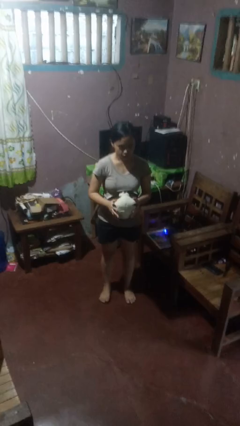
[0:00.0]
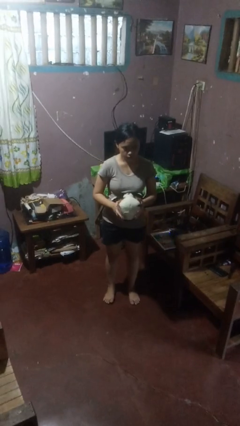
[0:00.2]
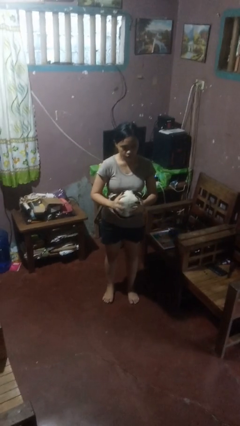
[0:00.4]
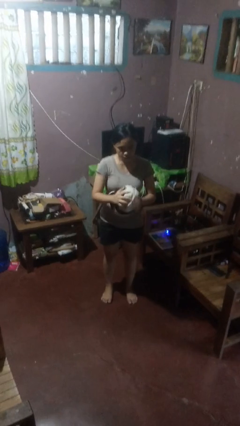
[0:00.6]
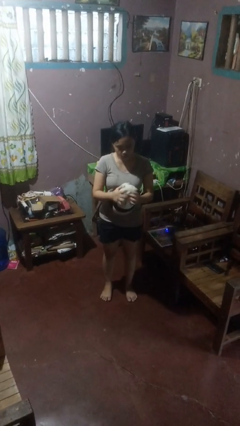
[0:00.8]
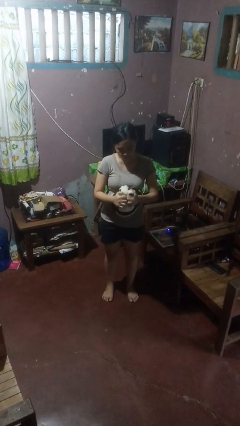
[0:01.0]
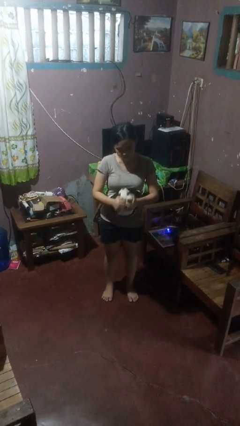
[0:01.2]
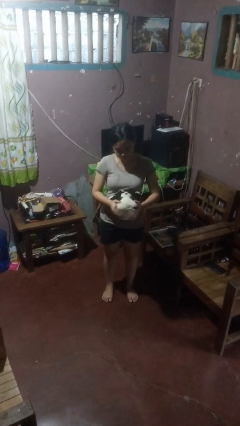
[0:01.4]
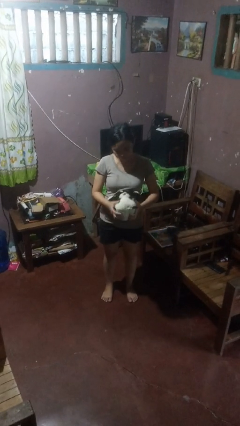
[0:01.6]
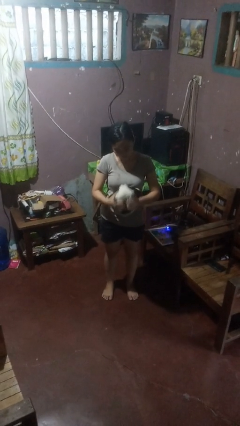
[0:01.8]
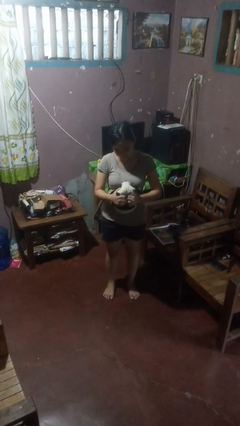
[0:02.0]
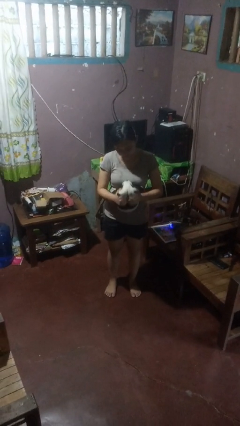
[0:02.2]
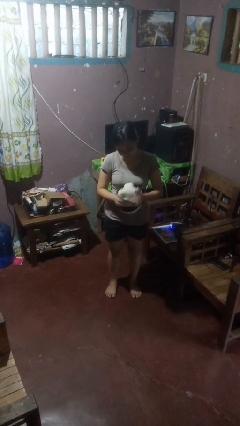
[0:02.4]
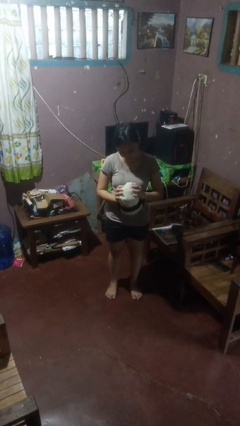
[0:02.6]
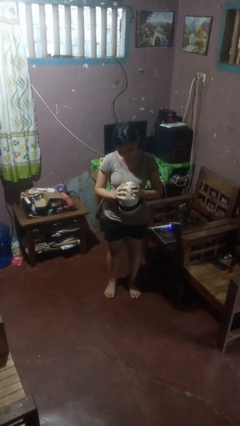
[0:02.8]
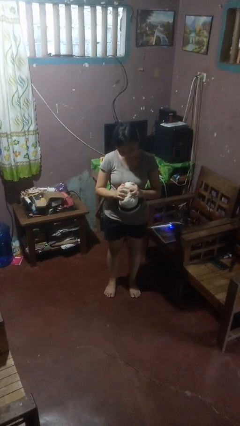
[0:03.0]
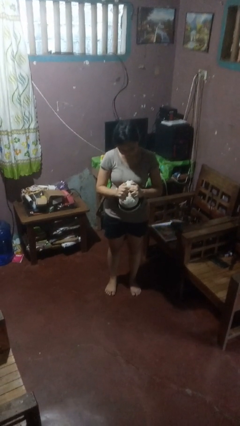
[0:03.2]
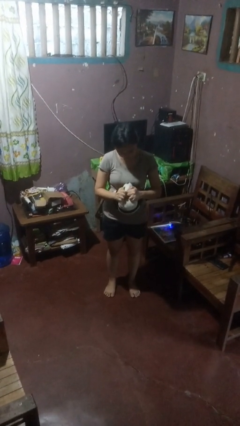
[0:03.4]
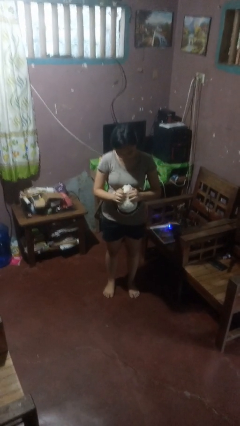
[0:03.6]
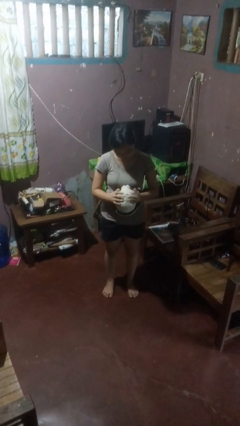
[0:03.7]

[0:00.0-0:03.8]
person squeezes object

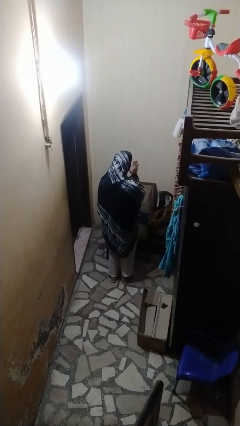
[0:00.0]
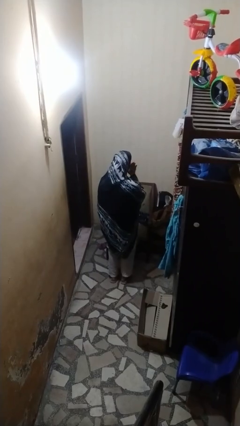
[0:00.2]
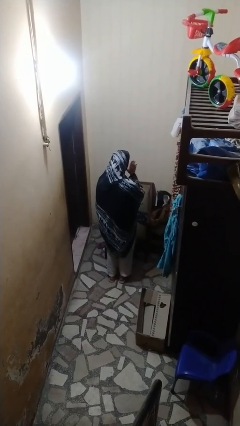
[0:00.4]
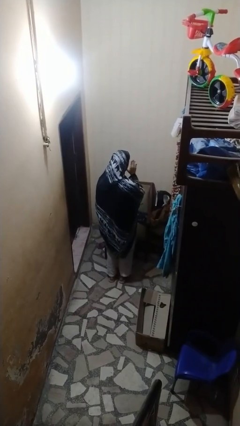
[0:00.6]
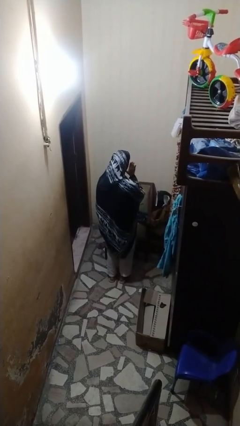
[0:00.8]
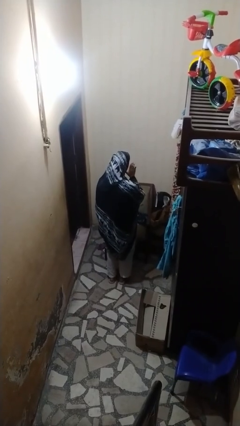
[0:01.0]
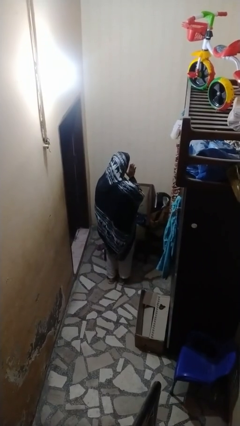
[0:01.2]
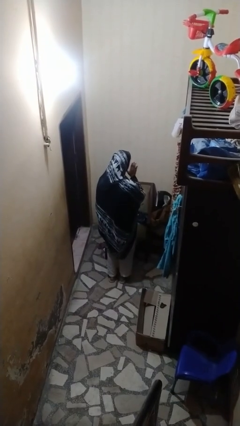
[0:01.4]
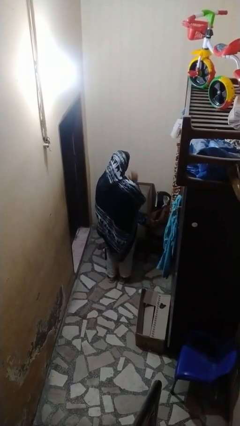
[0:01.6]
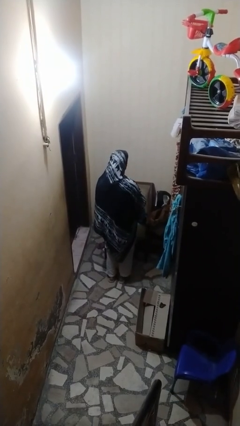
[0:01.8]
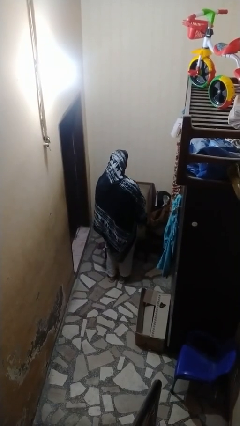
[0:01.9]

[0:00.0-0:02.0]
person gestures stop

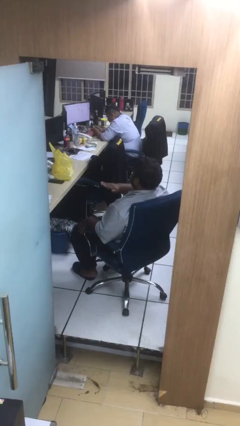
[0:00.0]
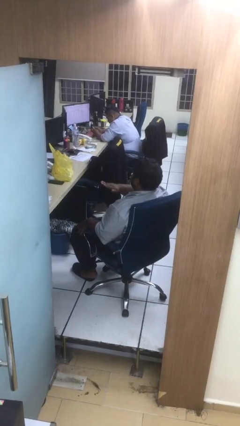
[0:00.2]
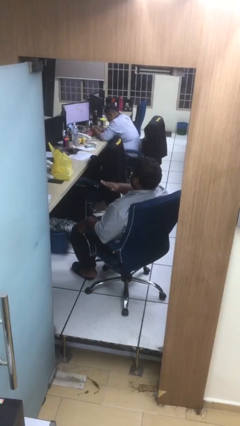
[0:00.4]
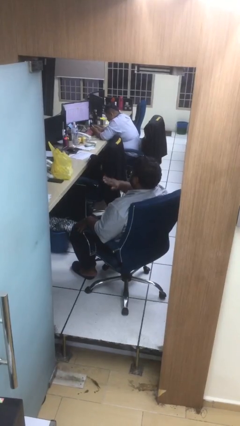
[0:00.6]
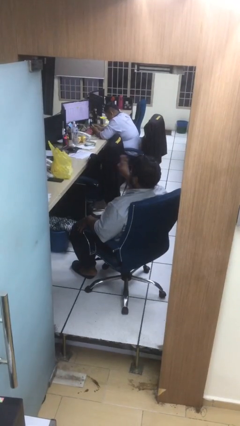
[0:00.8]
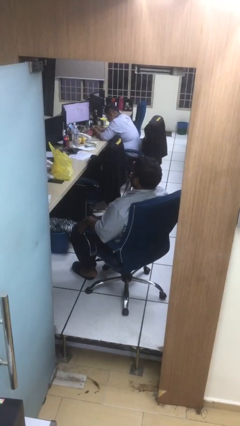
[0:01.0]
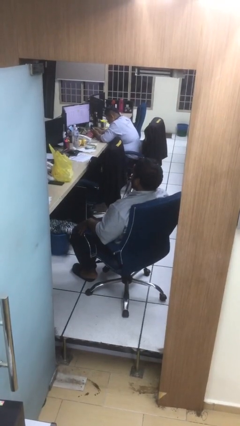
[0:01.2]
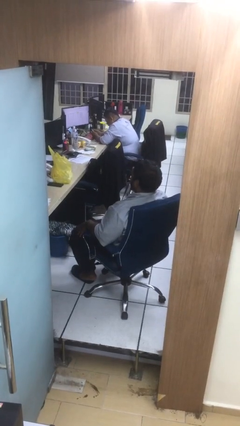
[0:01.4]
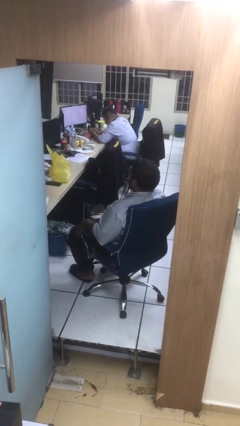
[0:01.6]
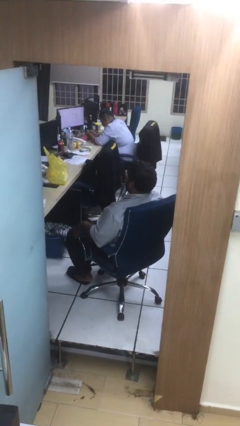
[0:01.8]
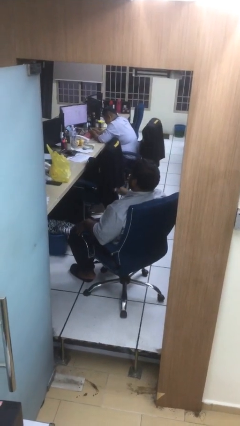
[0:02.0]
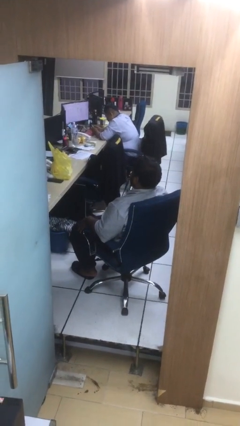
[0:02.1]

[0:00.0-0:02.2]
person gestures swipe right

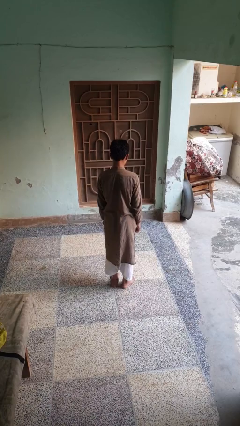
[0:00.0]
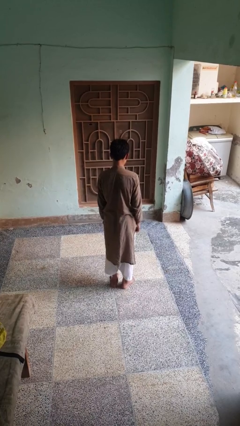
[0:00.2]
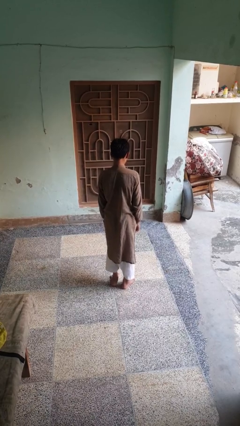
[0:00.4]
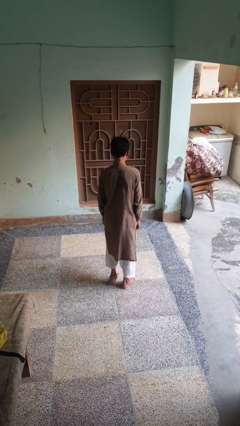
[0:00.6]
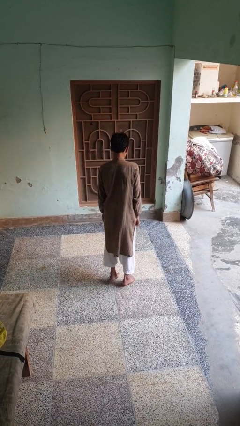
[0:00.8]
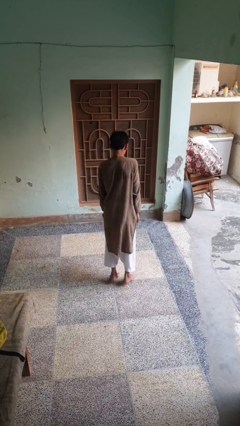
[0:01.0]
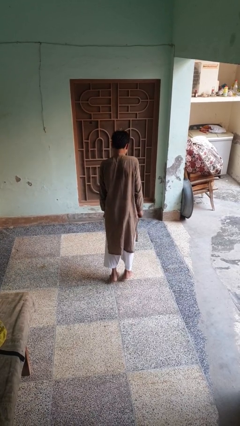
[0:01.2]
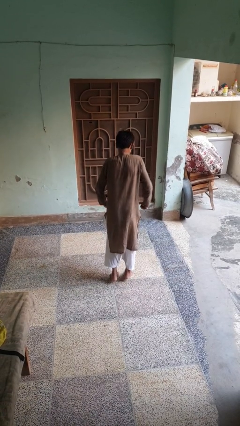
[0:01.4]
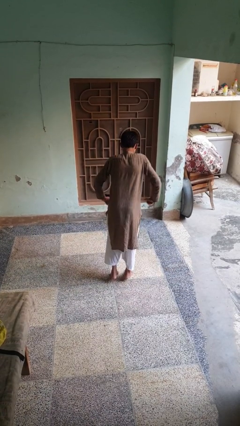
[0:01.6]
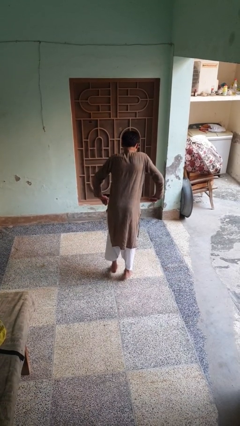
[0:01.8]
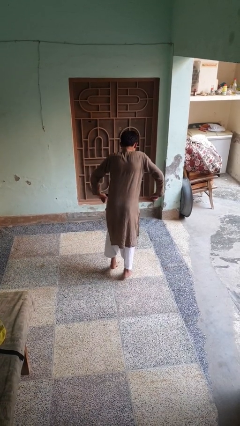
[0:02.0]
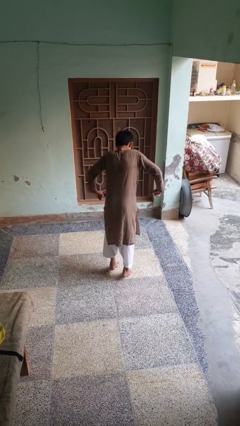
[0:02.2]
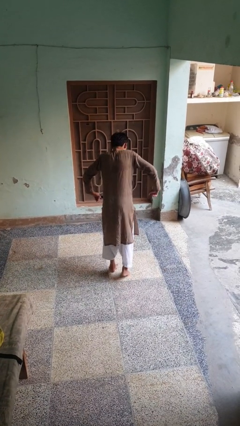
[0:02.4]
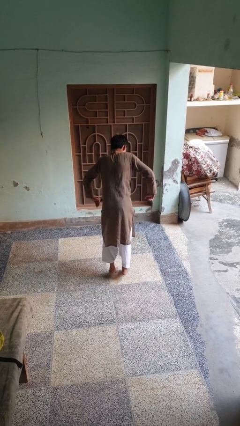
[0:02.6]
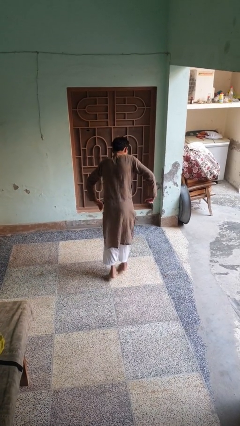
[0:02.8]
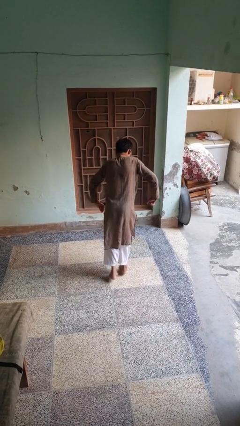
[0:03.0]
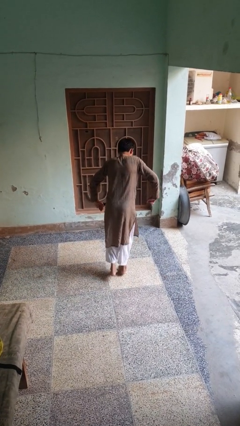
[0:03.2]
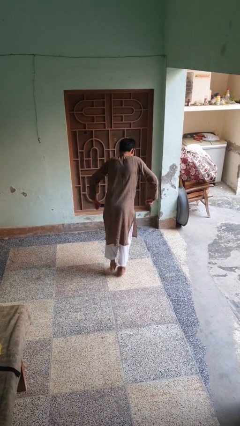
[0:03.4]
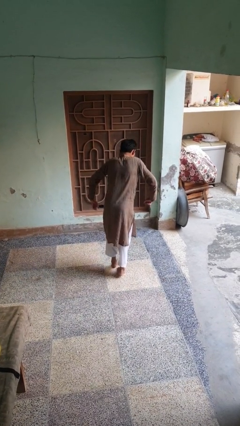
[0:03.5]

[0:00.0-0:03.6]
person walks tiptoe

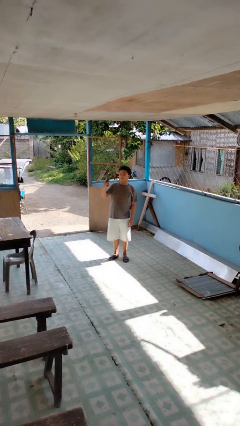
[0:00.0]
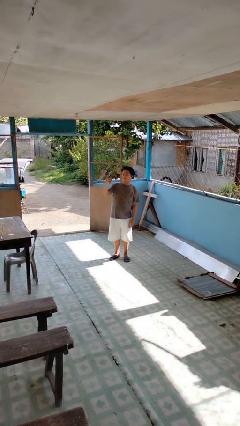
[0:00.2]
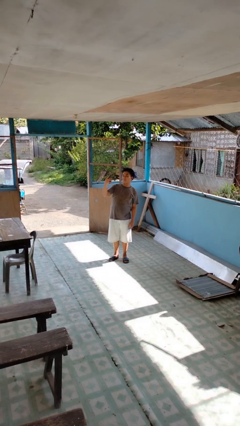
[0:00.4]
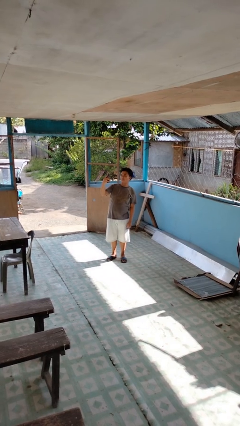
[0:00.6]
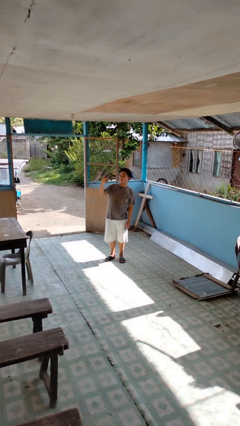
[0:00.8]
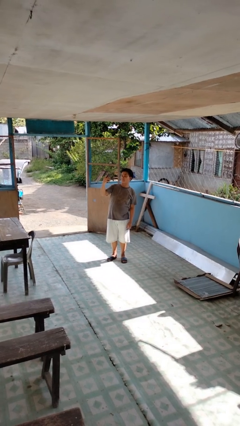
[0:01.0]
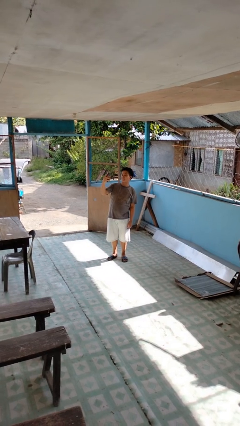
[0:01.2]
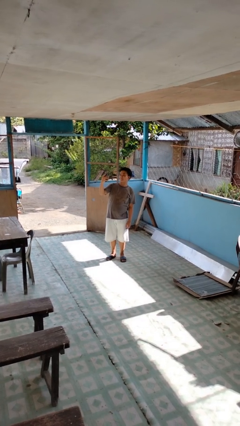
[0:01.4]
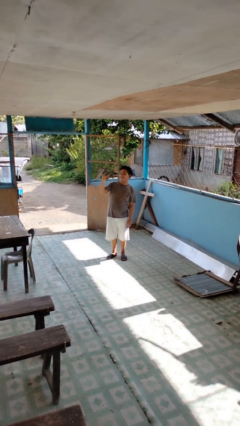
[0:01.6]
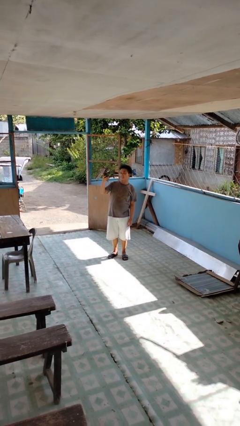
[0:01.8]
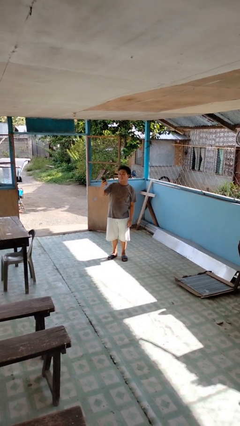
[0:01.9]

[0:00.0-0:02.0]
person takes selfie

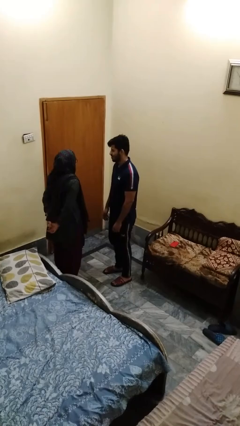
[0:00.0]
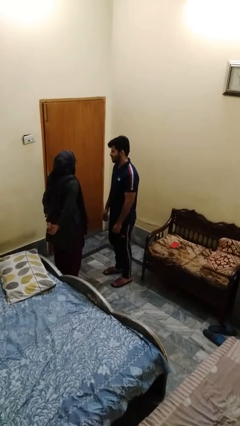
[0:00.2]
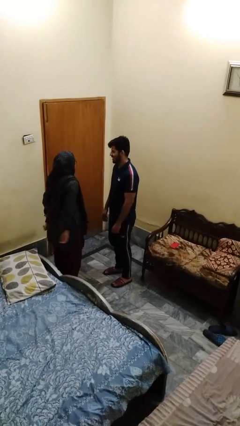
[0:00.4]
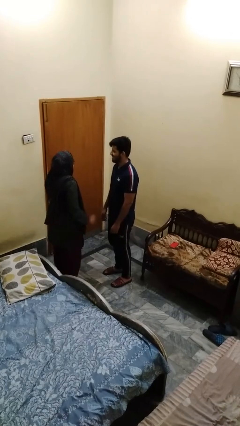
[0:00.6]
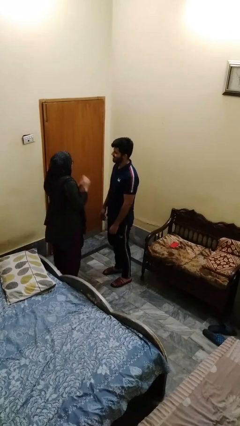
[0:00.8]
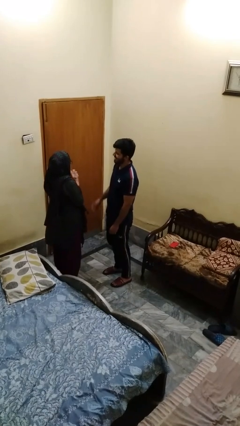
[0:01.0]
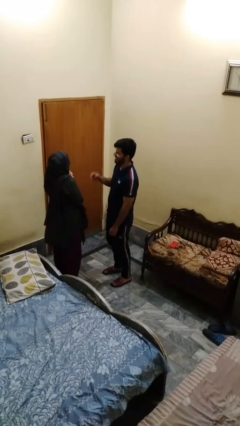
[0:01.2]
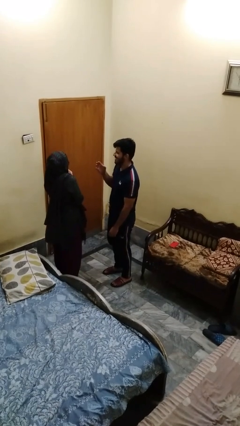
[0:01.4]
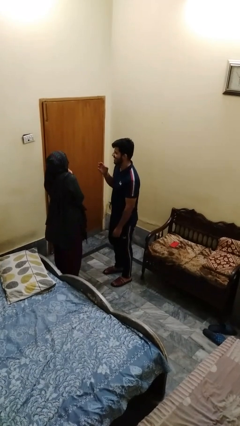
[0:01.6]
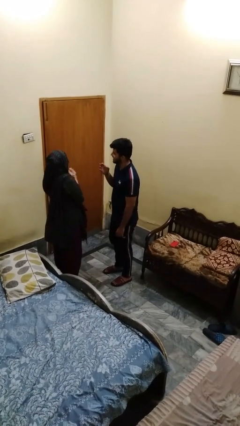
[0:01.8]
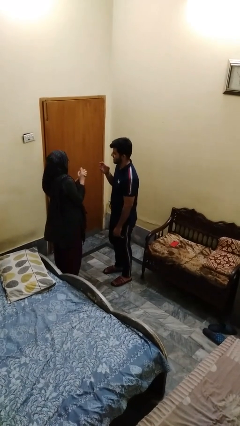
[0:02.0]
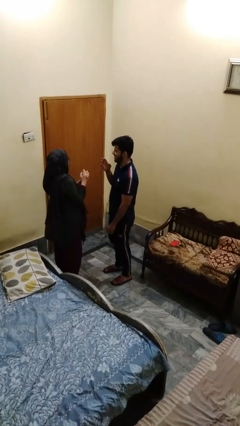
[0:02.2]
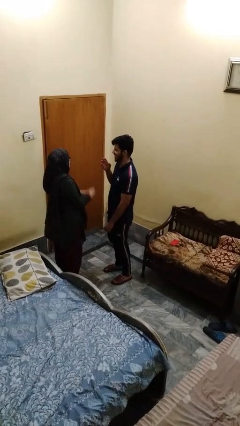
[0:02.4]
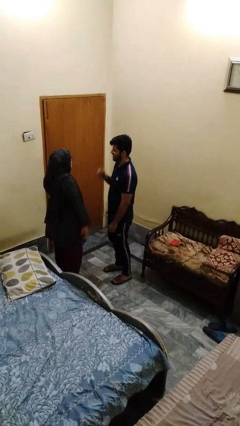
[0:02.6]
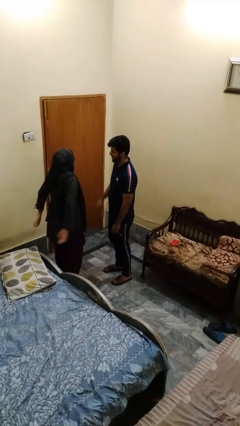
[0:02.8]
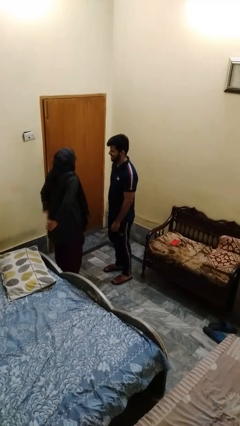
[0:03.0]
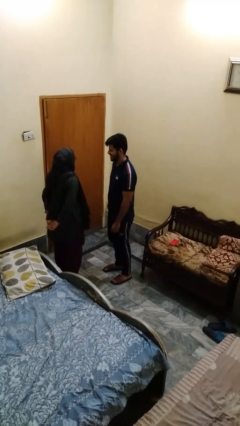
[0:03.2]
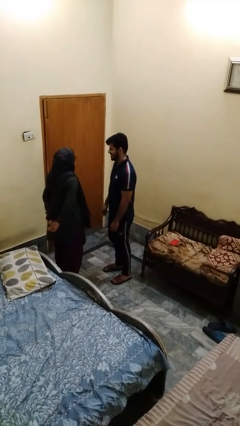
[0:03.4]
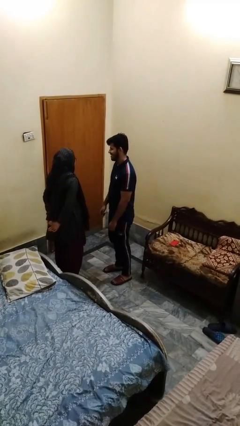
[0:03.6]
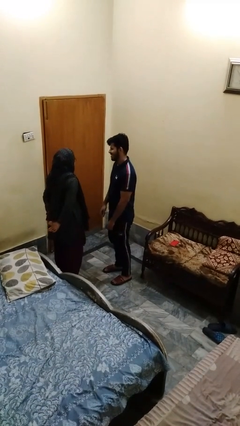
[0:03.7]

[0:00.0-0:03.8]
person laughs with person
